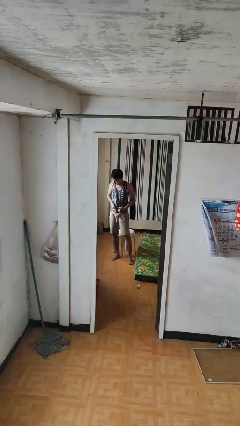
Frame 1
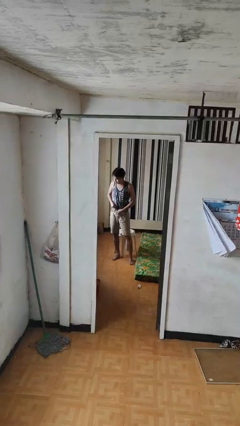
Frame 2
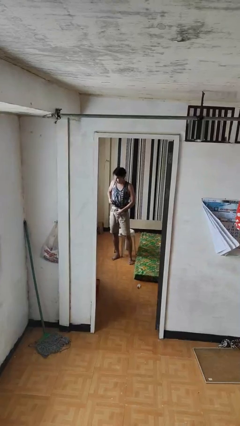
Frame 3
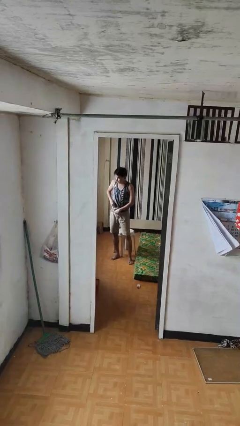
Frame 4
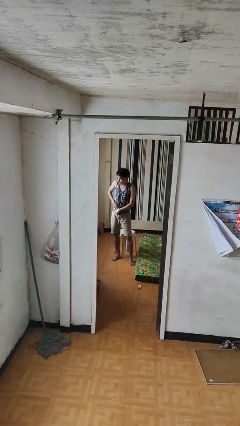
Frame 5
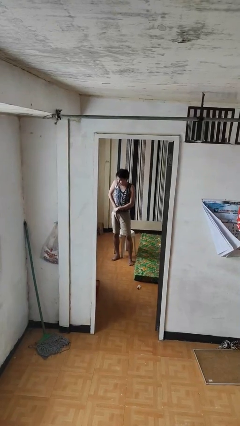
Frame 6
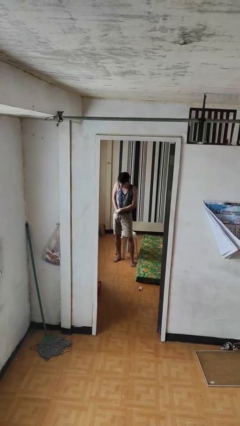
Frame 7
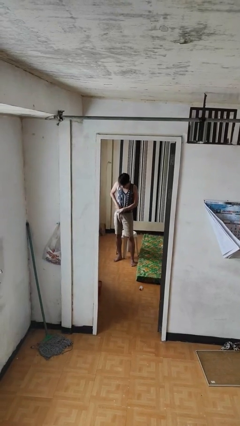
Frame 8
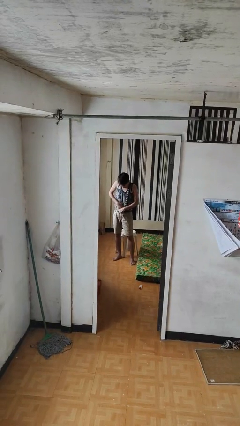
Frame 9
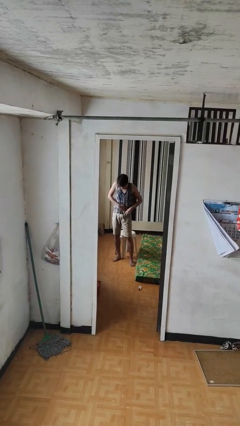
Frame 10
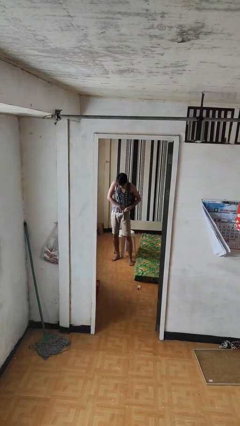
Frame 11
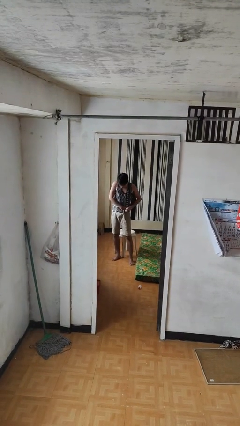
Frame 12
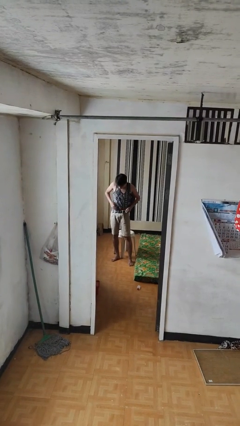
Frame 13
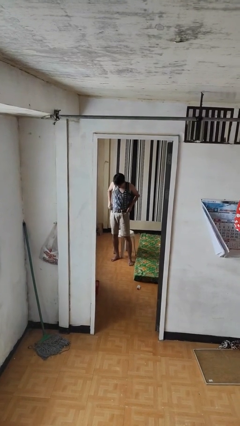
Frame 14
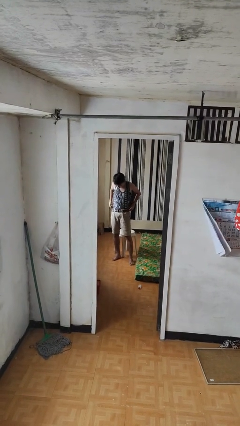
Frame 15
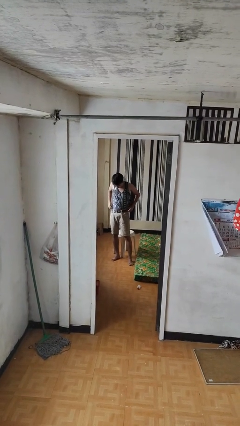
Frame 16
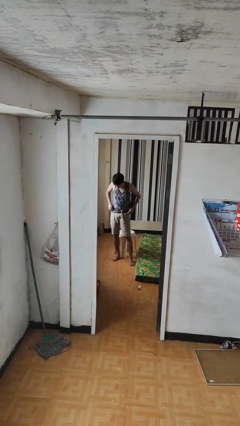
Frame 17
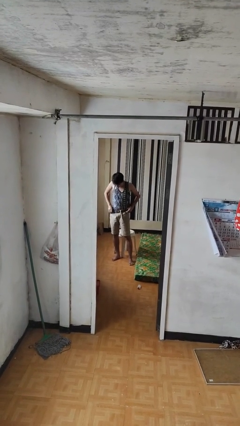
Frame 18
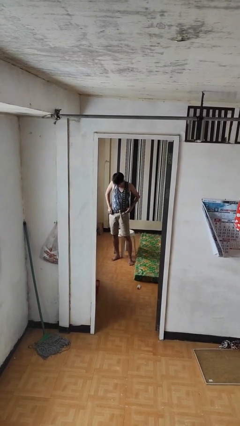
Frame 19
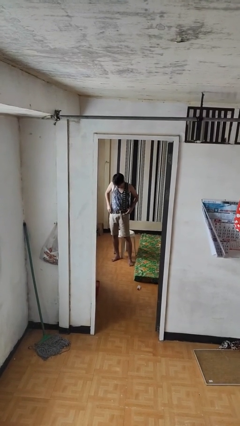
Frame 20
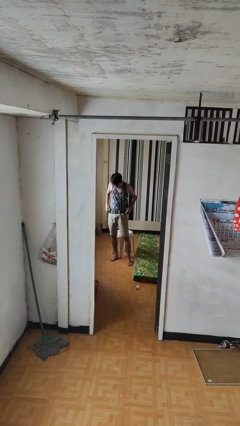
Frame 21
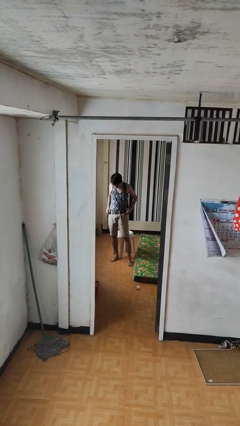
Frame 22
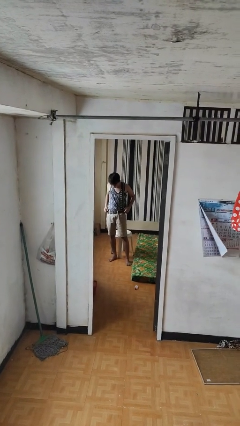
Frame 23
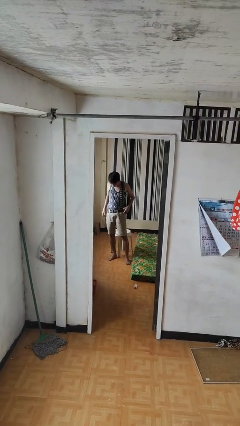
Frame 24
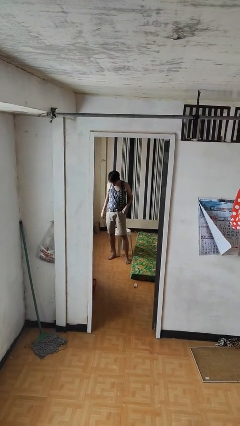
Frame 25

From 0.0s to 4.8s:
person tucks in shirt

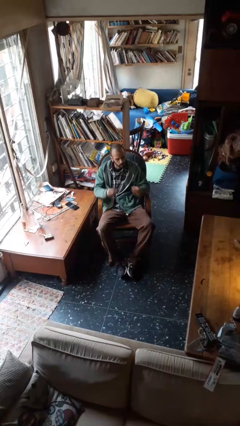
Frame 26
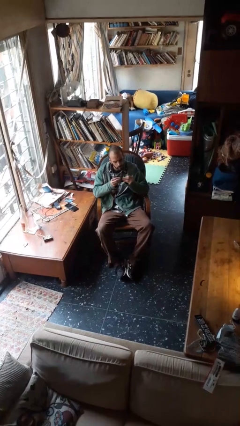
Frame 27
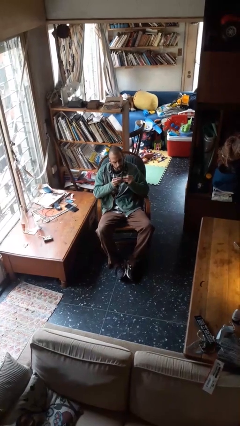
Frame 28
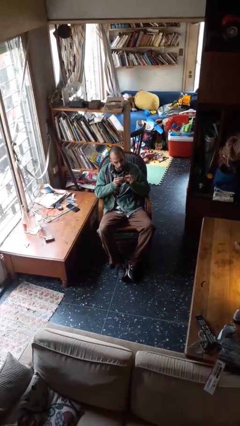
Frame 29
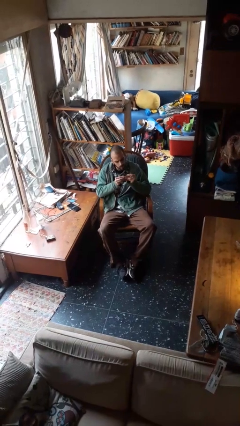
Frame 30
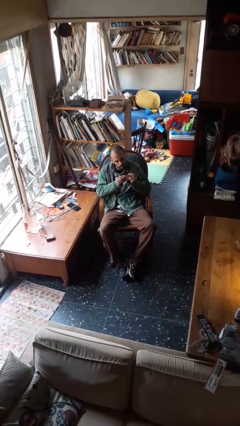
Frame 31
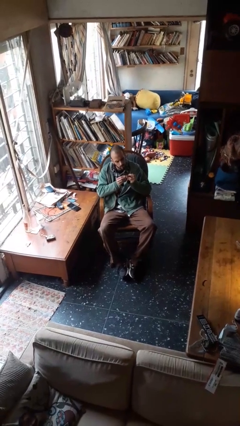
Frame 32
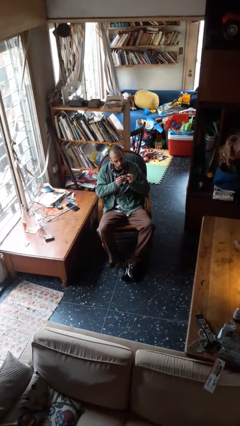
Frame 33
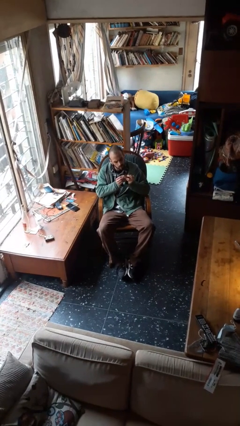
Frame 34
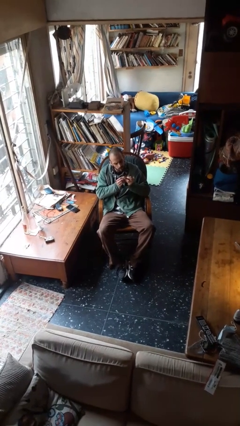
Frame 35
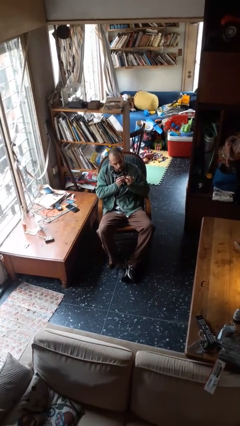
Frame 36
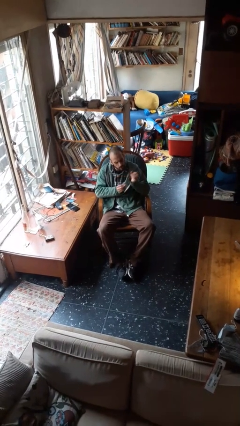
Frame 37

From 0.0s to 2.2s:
person files fingernails

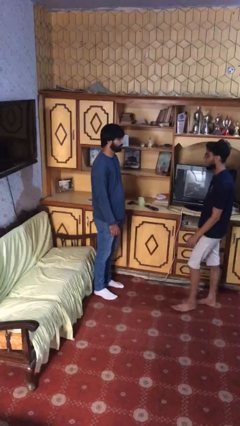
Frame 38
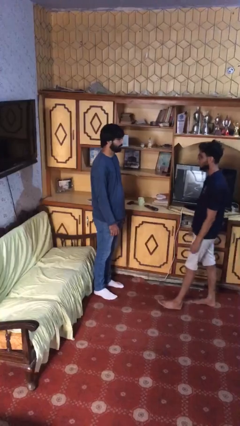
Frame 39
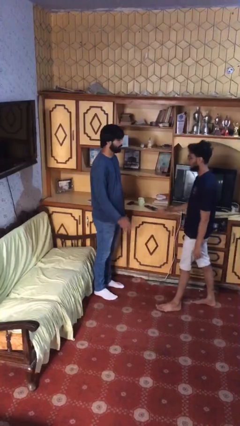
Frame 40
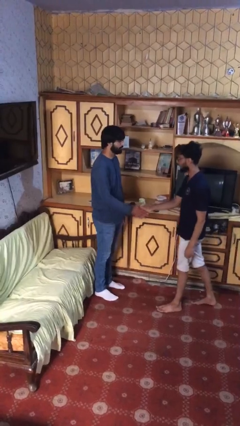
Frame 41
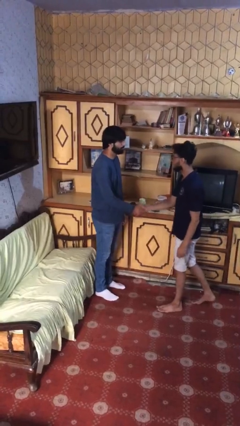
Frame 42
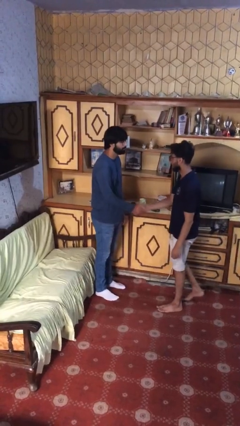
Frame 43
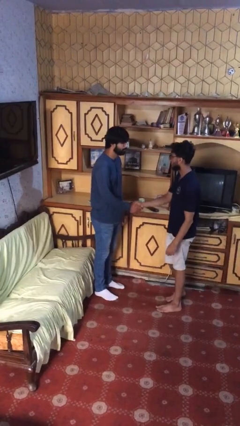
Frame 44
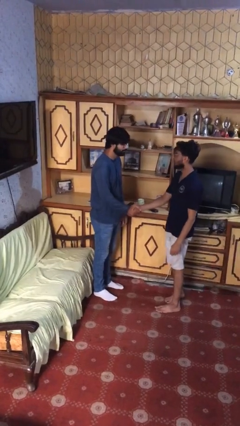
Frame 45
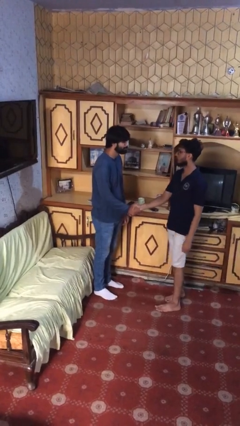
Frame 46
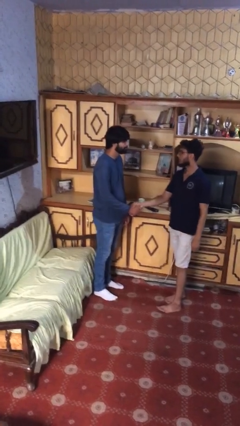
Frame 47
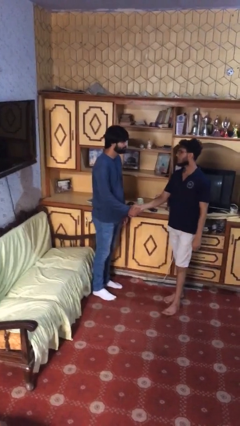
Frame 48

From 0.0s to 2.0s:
person shakes hand

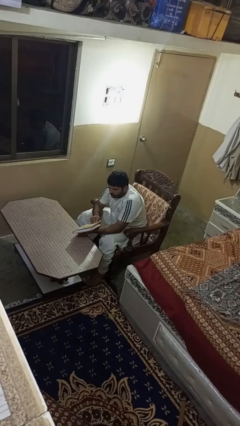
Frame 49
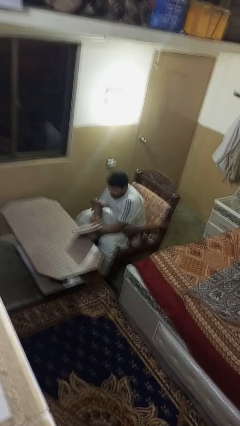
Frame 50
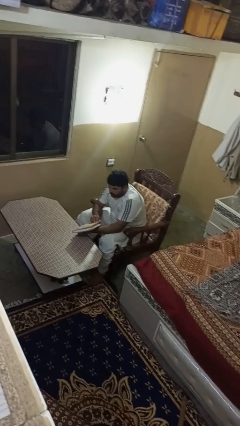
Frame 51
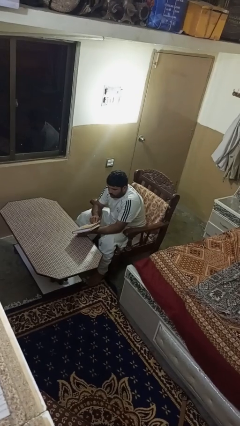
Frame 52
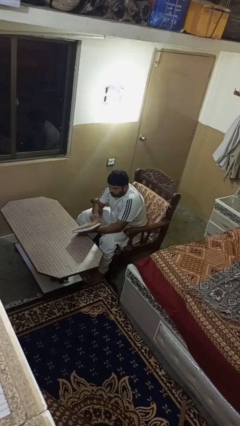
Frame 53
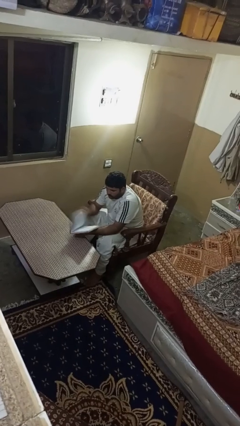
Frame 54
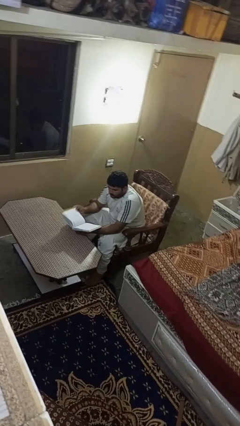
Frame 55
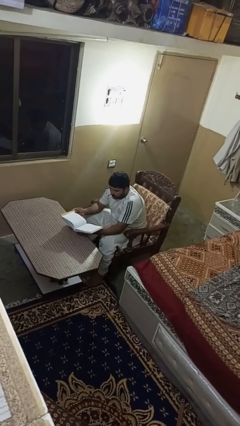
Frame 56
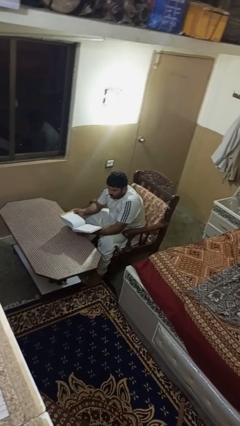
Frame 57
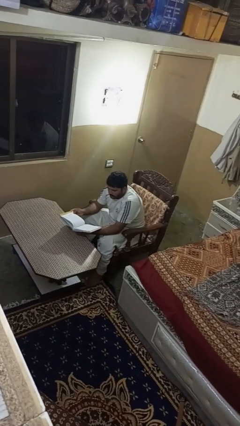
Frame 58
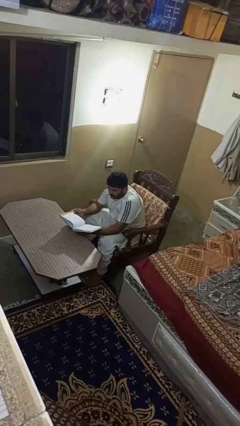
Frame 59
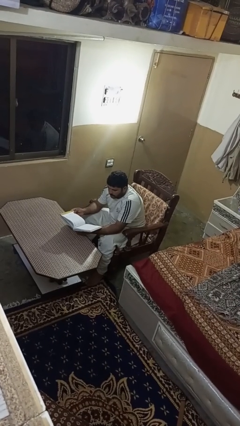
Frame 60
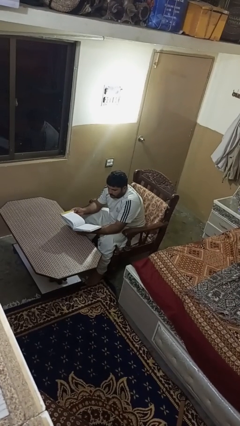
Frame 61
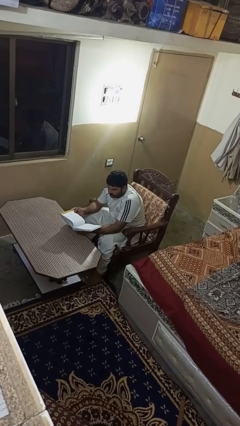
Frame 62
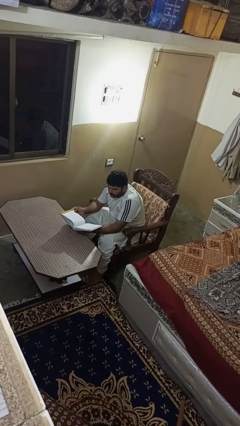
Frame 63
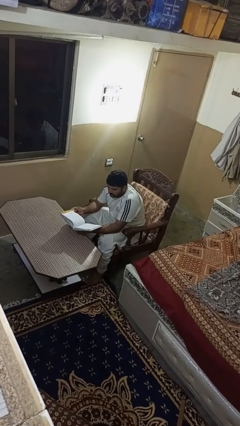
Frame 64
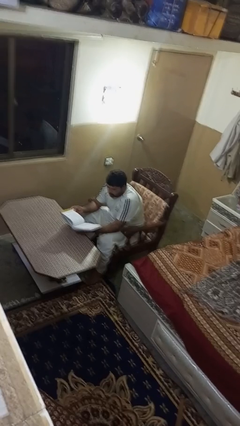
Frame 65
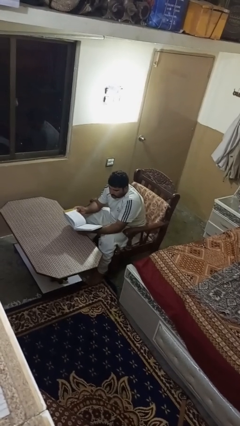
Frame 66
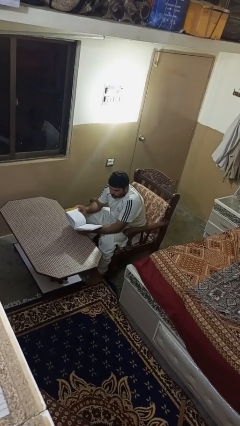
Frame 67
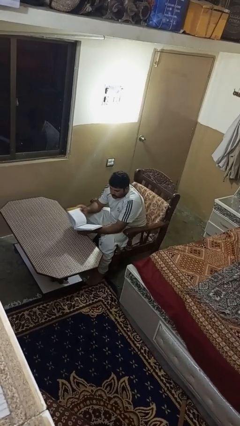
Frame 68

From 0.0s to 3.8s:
person reads book

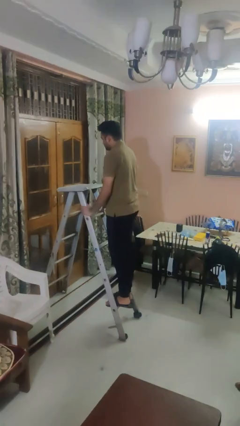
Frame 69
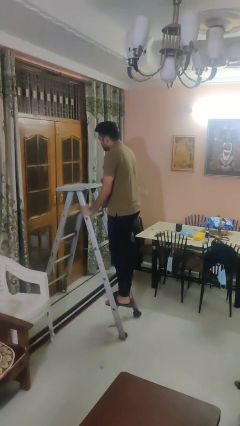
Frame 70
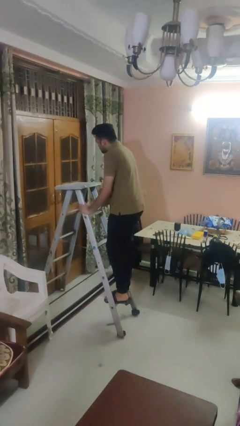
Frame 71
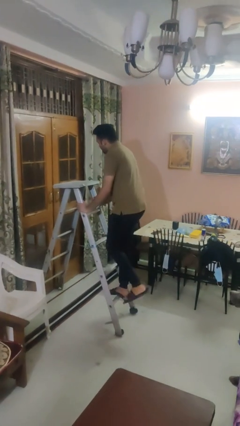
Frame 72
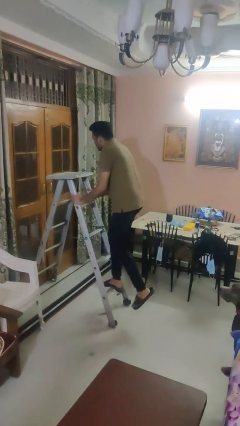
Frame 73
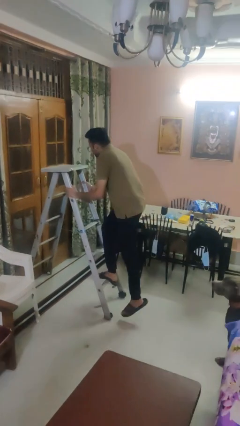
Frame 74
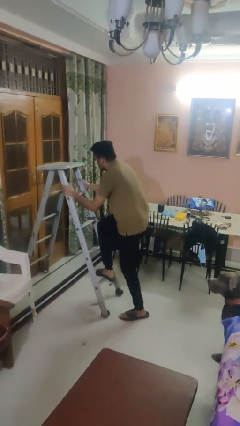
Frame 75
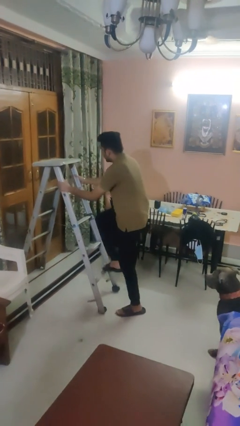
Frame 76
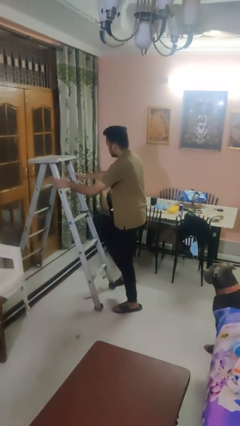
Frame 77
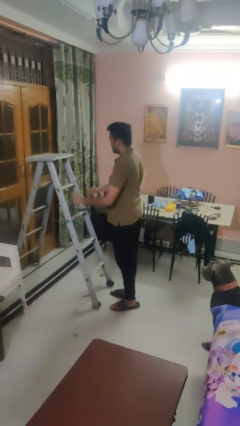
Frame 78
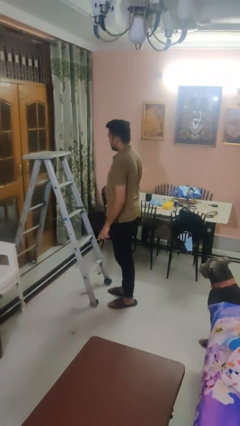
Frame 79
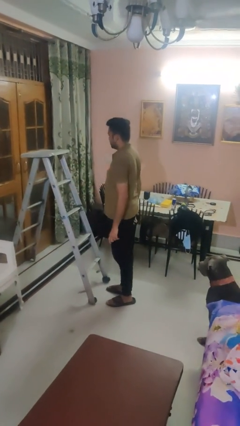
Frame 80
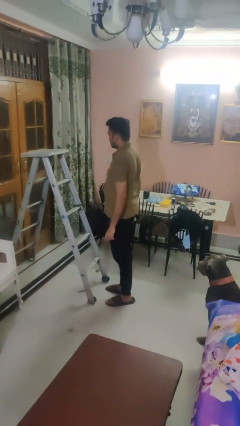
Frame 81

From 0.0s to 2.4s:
person climbs down ladder

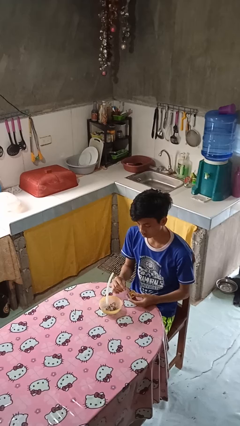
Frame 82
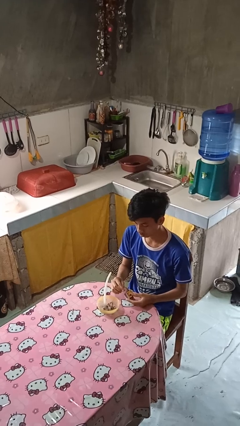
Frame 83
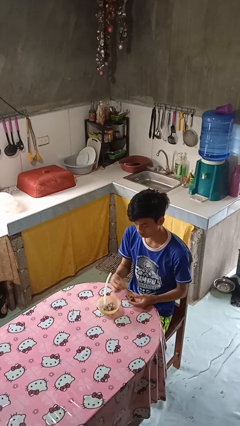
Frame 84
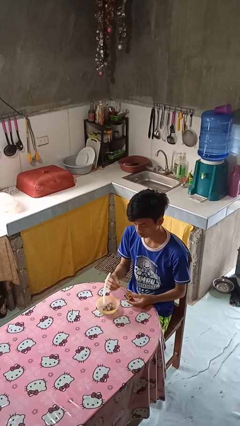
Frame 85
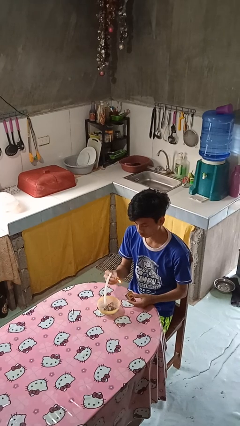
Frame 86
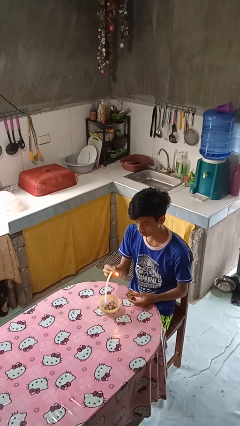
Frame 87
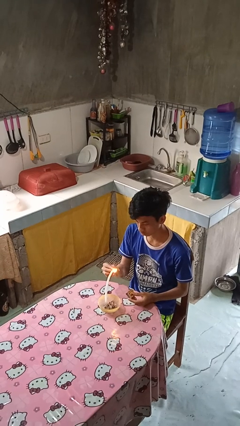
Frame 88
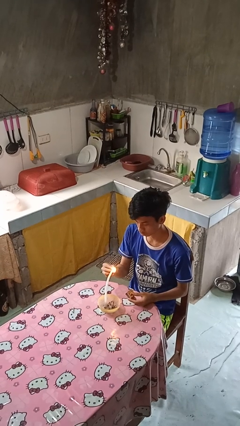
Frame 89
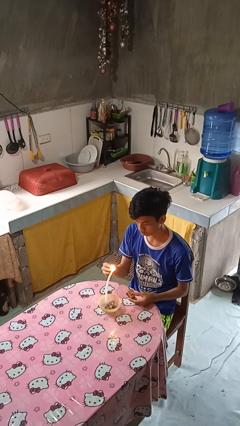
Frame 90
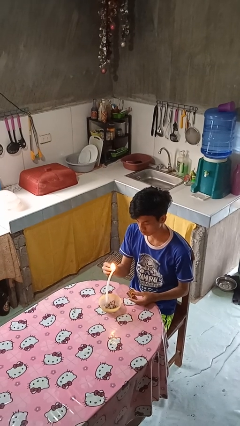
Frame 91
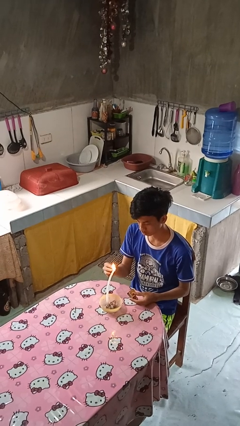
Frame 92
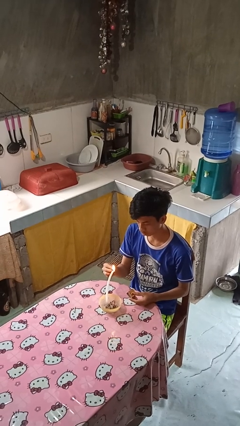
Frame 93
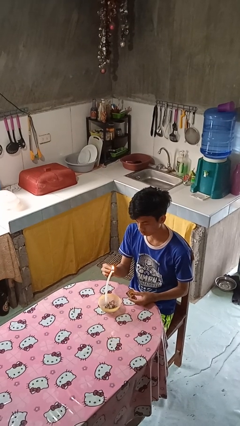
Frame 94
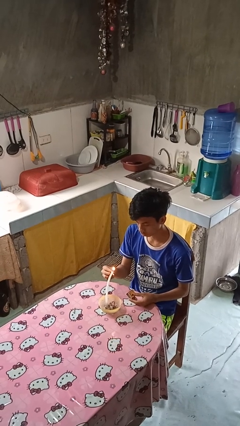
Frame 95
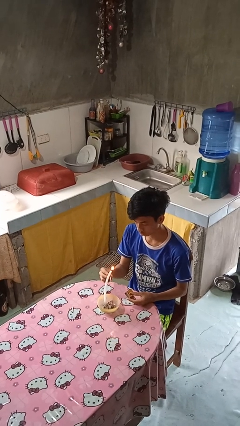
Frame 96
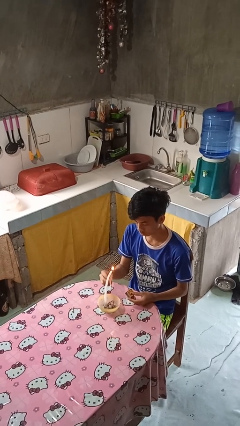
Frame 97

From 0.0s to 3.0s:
person lights candle
